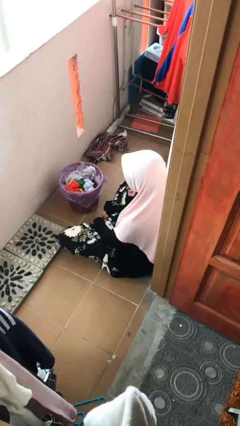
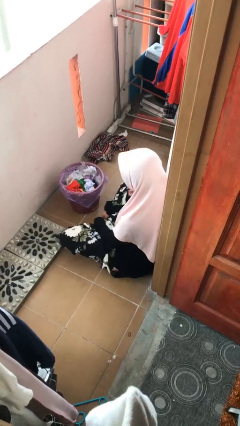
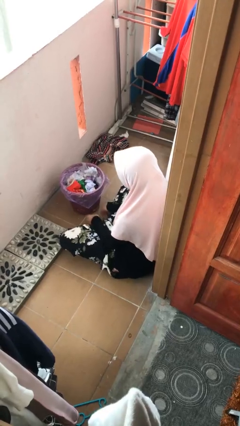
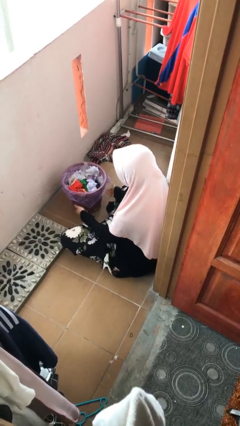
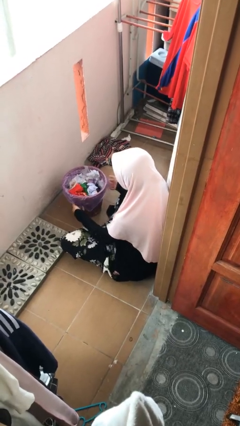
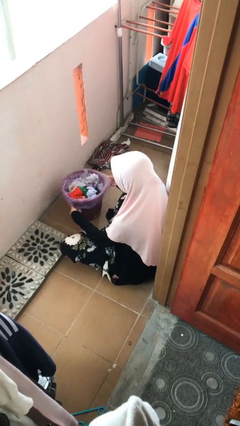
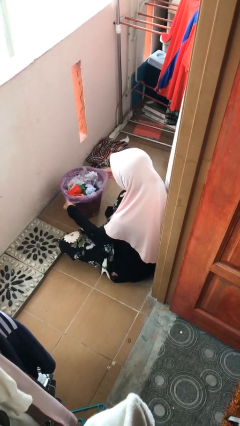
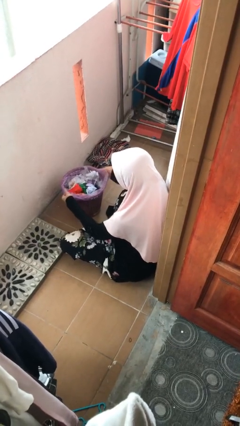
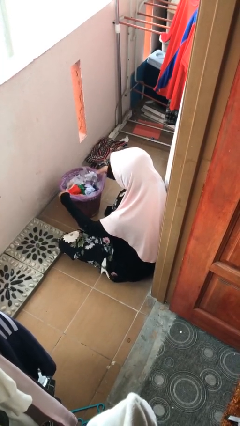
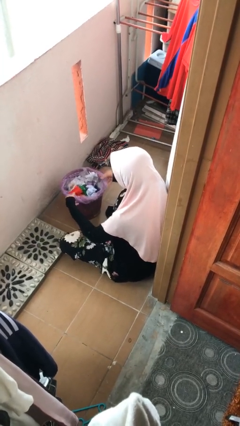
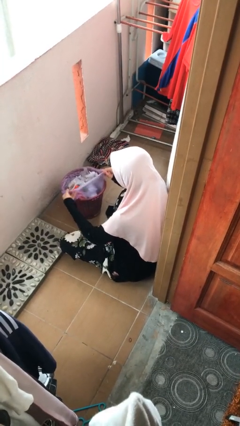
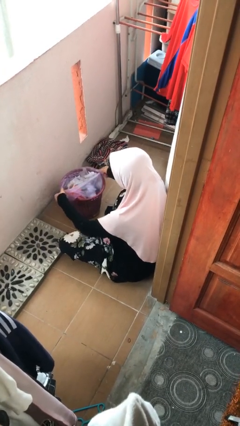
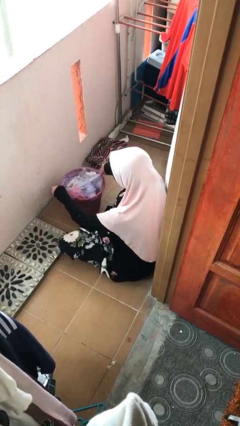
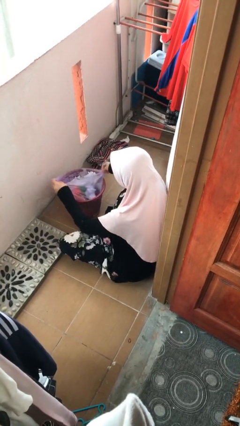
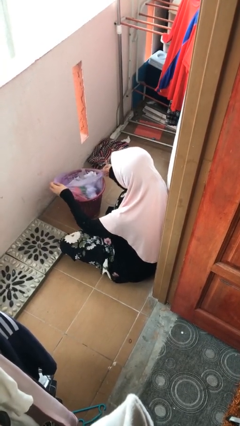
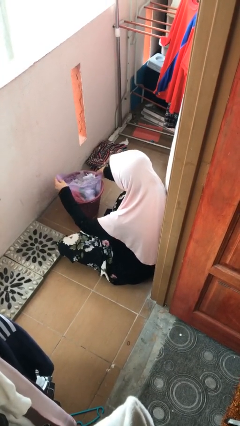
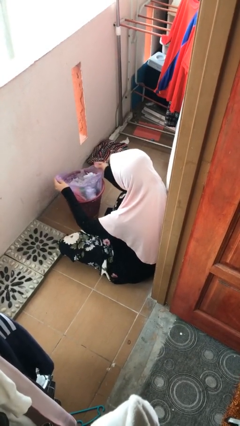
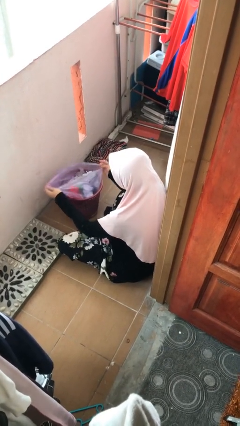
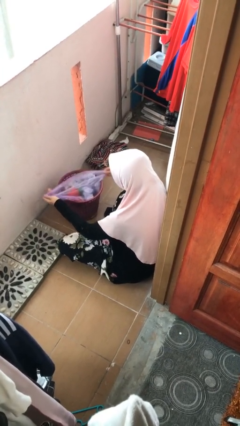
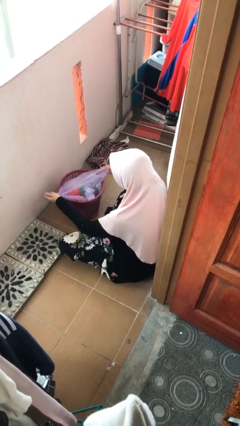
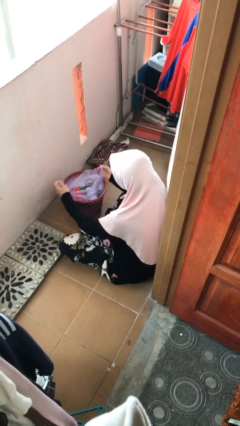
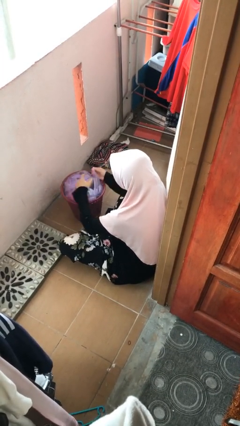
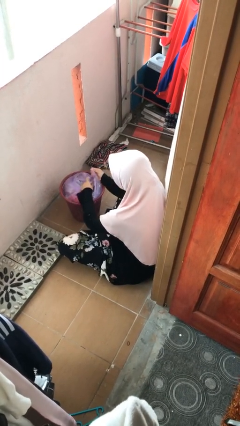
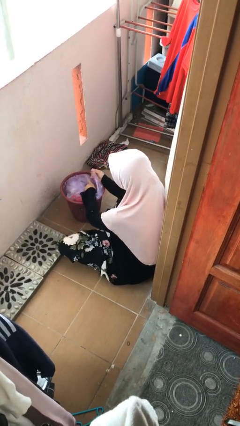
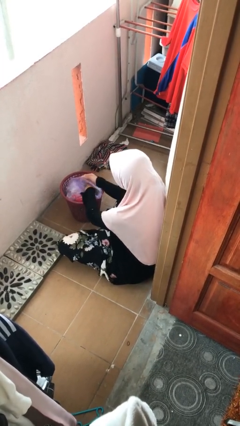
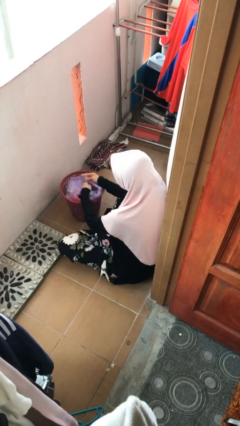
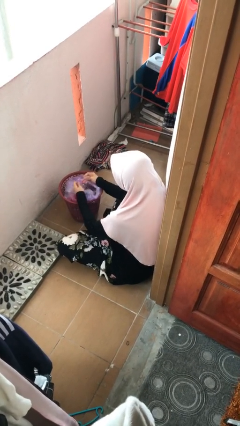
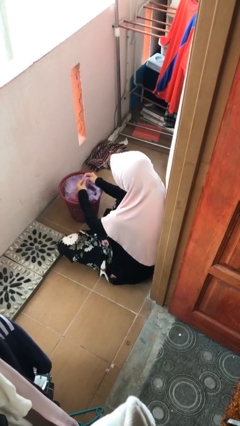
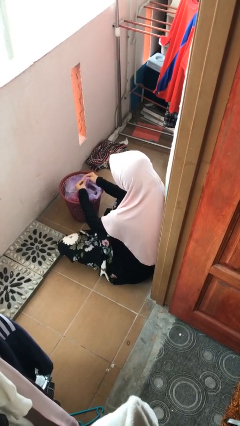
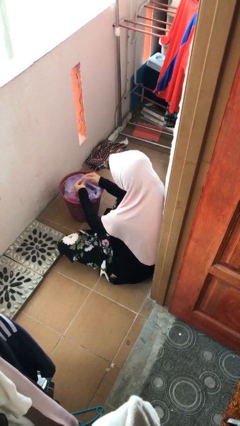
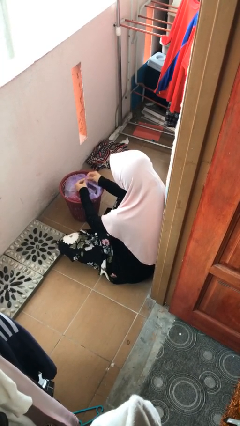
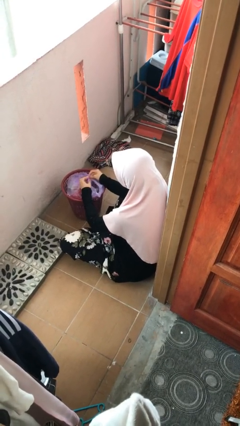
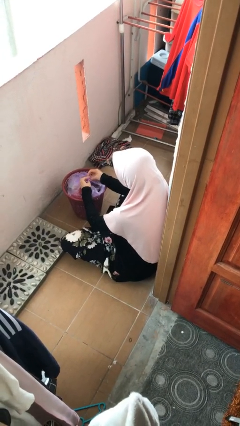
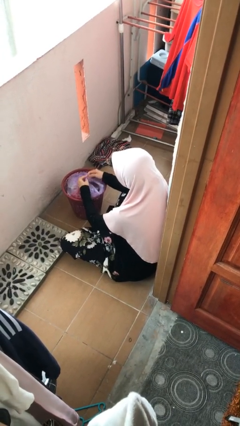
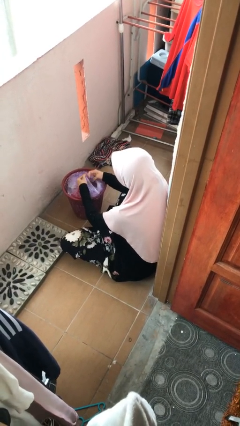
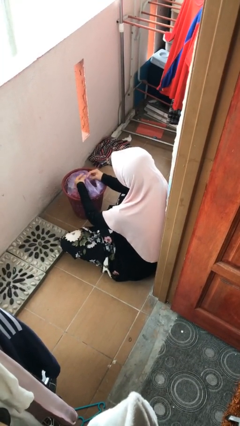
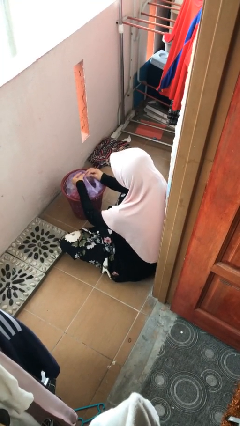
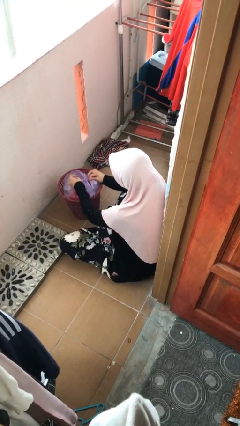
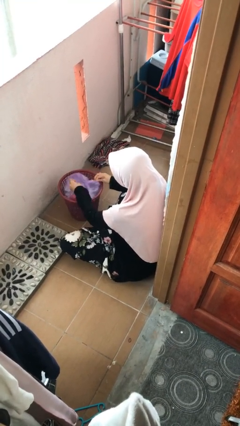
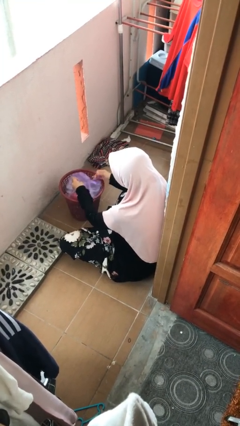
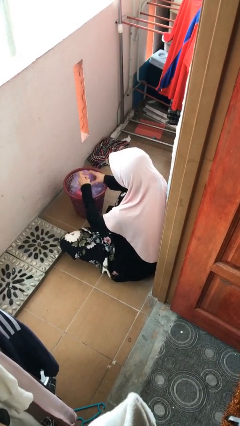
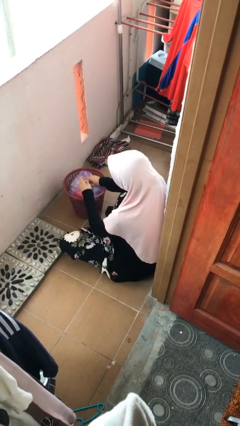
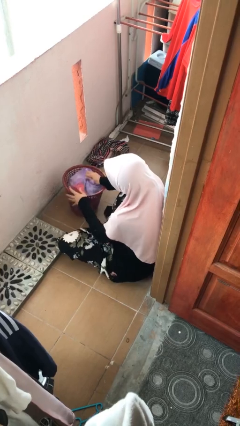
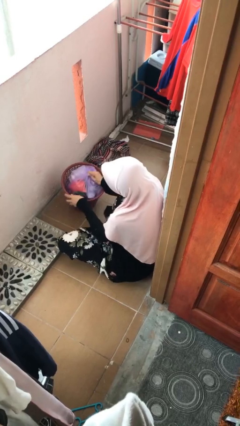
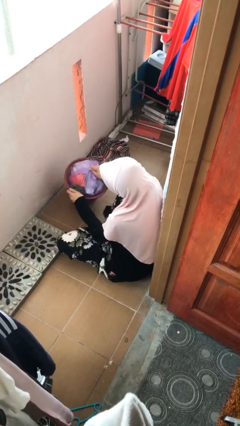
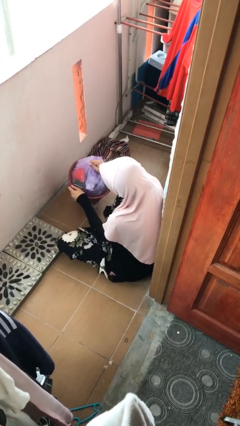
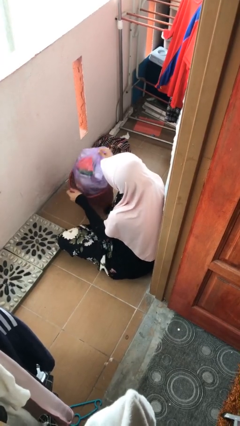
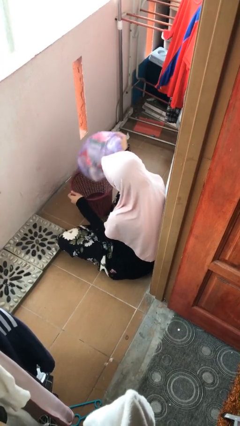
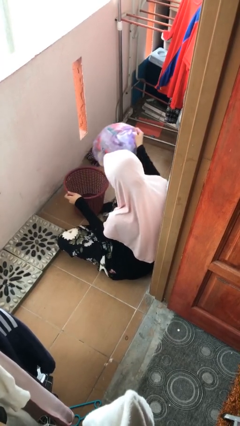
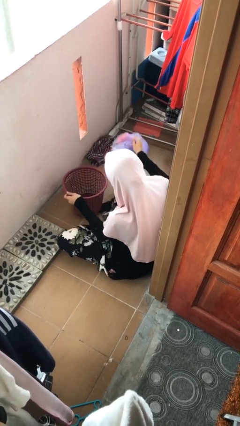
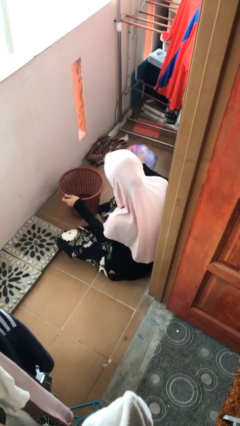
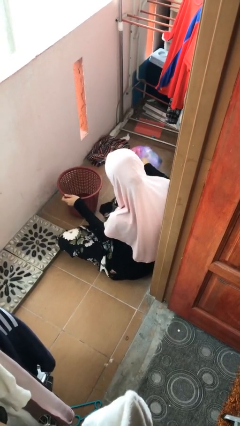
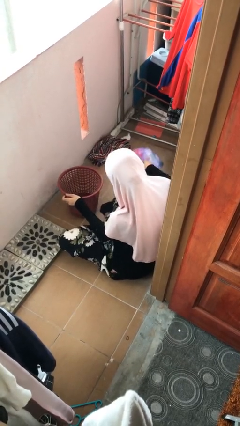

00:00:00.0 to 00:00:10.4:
person removes trashbag from trashcan

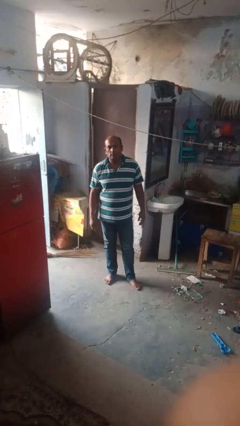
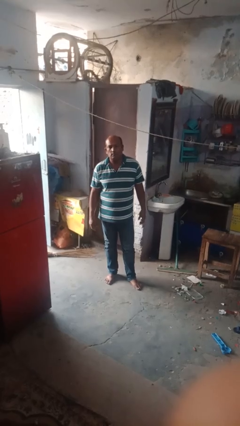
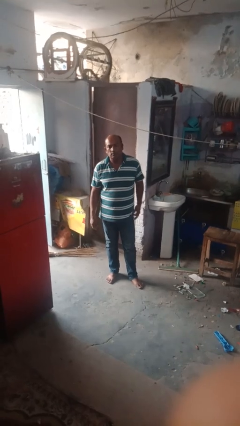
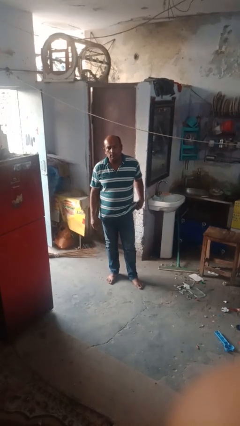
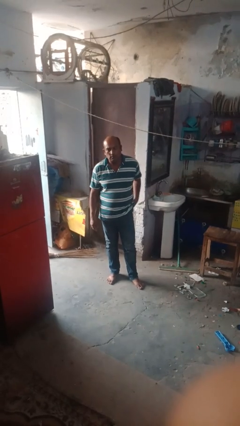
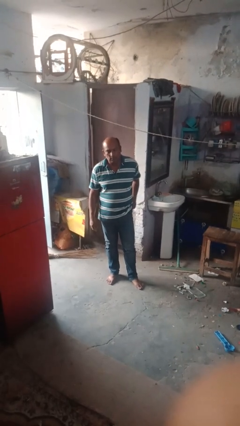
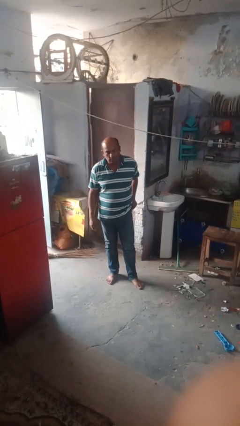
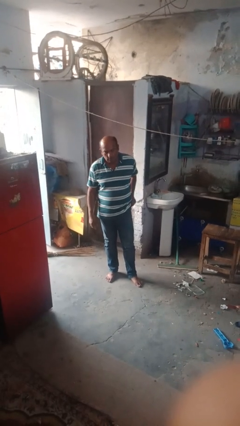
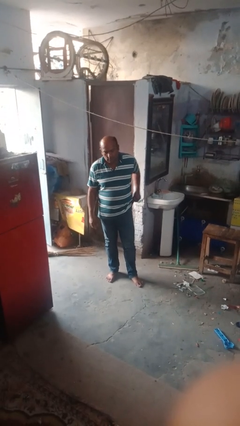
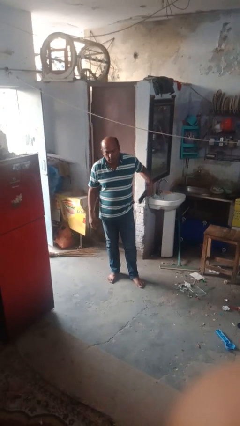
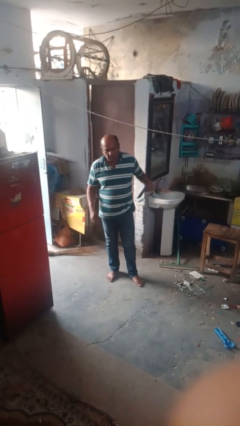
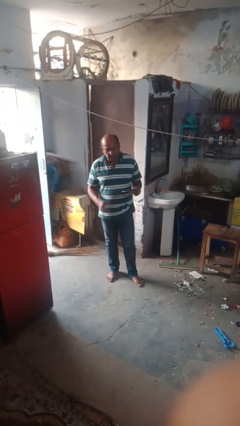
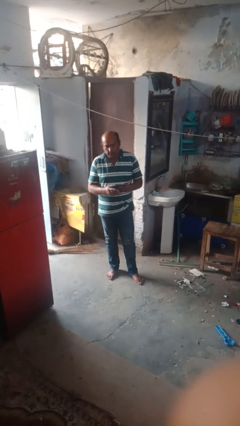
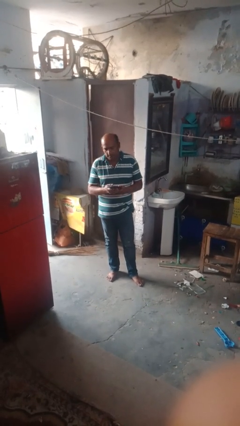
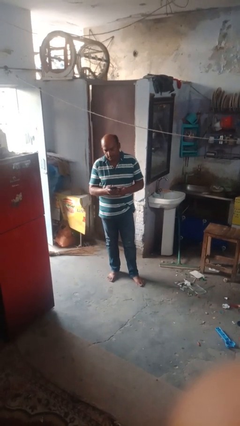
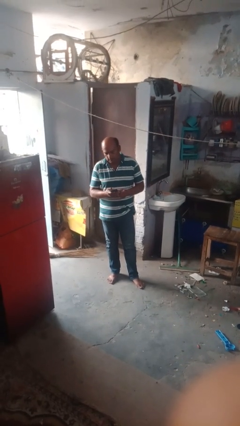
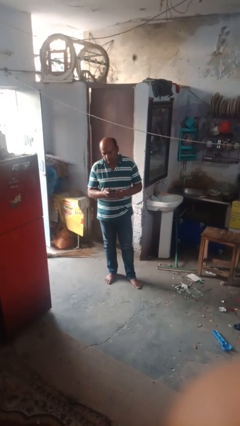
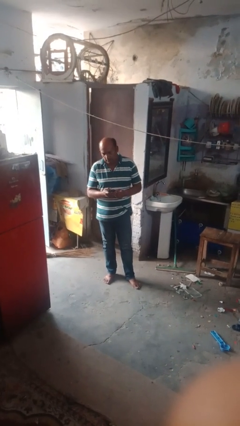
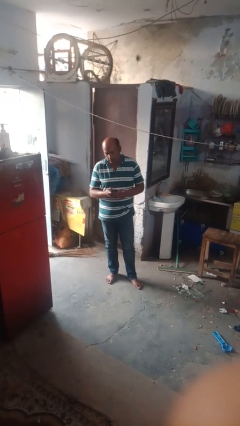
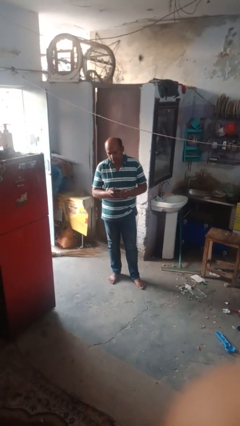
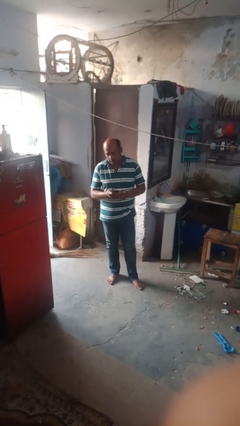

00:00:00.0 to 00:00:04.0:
person takes phone from pocket

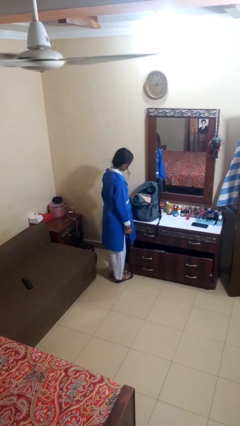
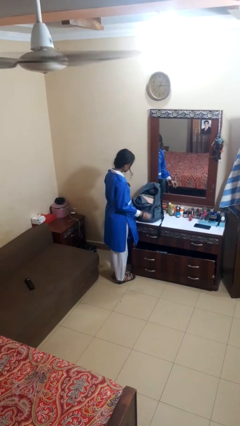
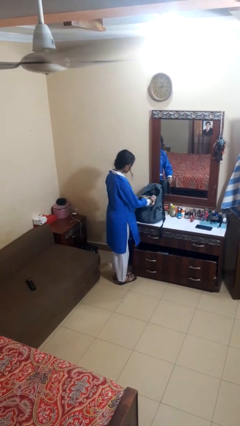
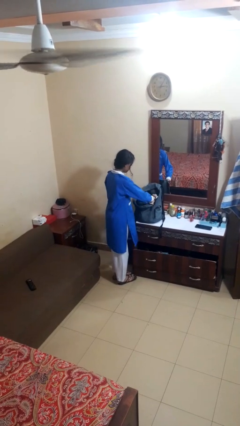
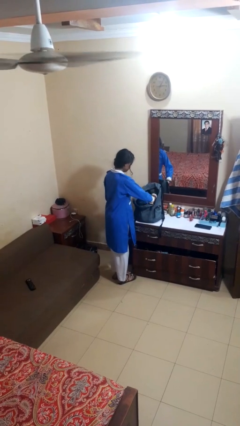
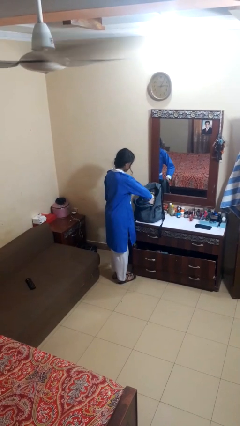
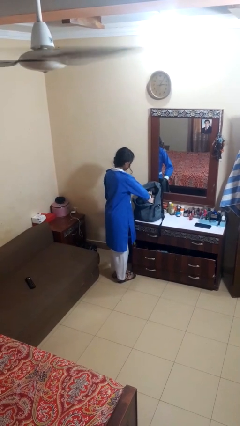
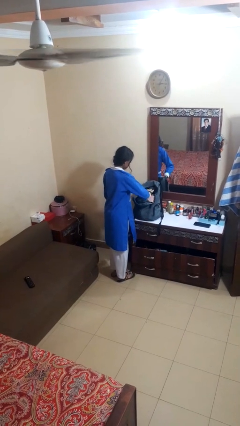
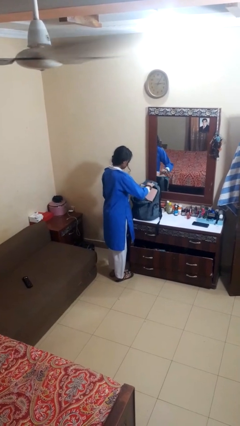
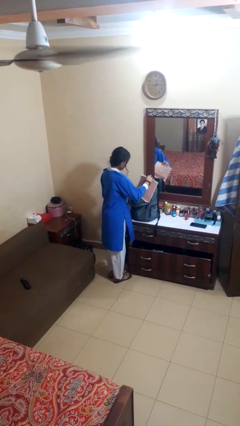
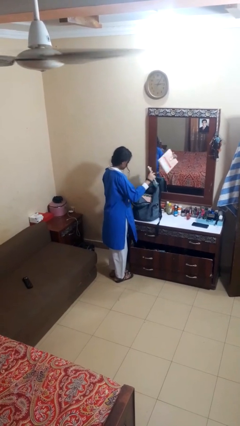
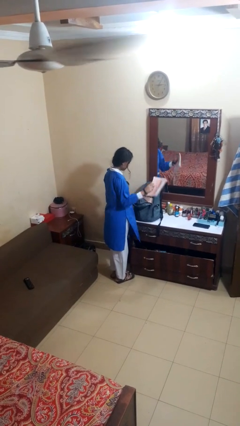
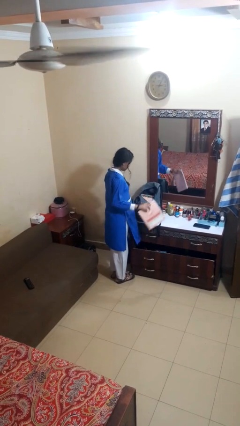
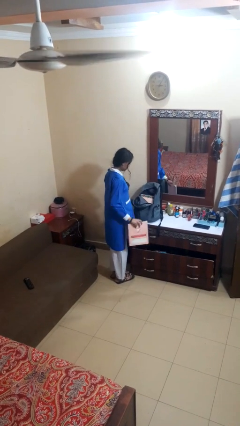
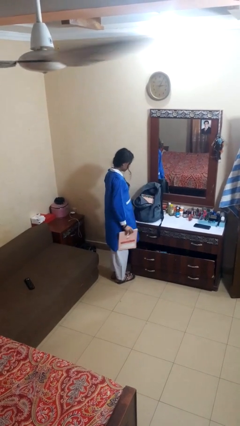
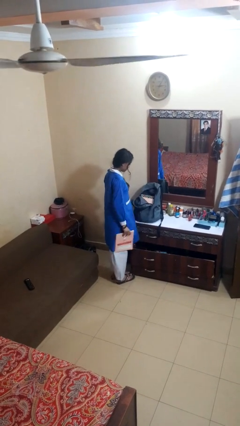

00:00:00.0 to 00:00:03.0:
person takes object from bag

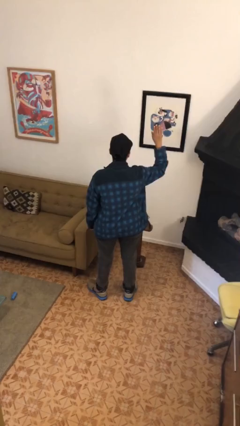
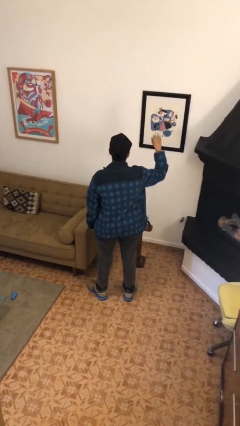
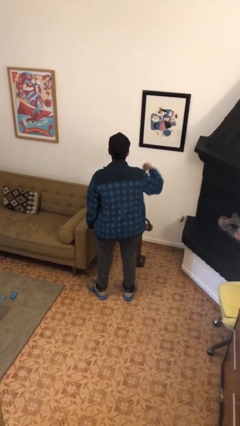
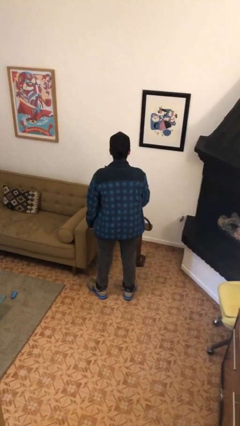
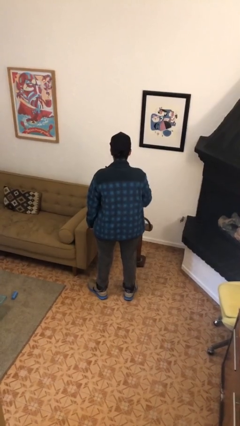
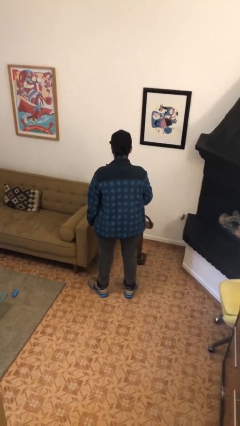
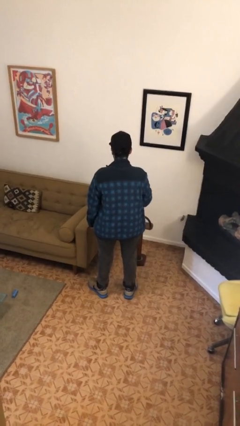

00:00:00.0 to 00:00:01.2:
person gestures lower hand
